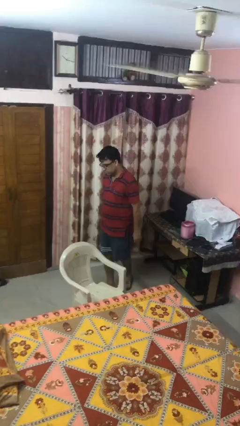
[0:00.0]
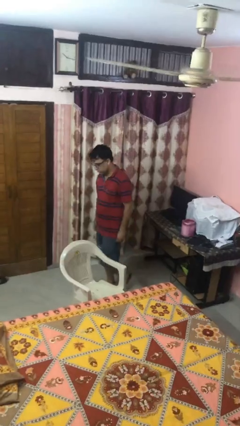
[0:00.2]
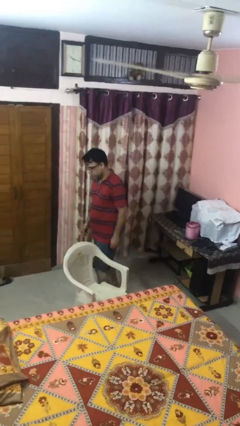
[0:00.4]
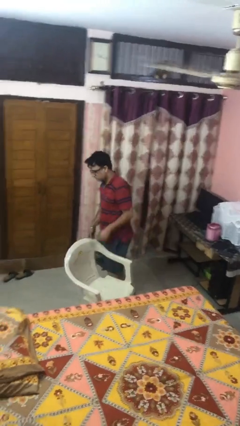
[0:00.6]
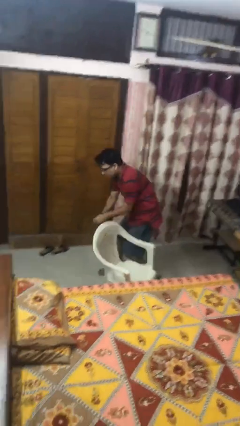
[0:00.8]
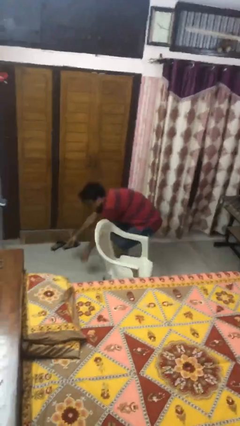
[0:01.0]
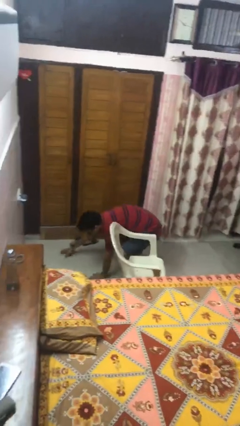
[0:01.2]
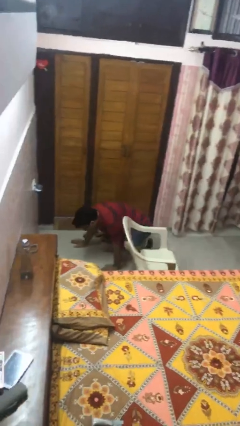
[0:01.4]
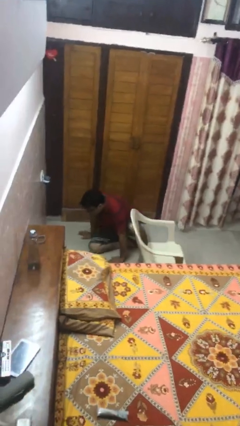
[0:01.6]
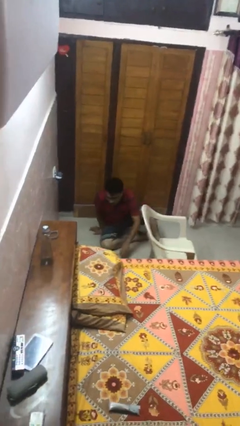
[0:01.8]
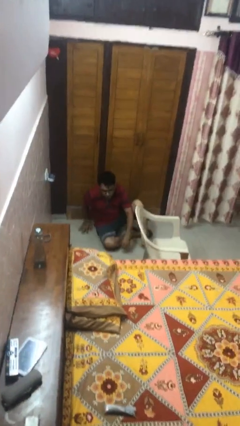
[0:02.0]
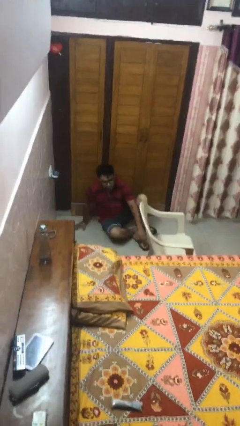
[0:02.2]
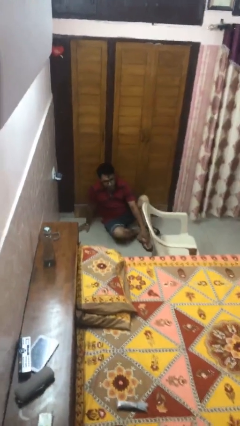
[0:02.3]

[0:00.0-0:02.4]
person trips on object on floor

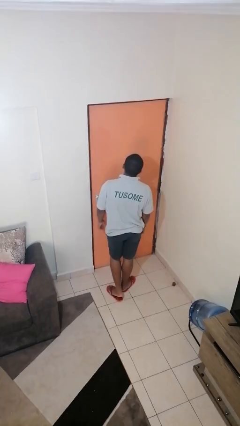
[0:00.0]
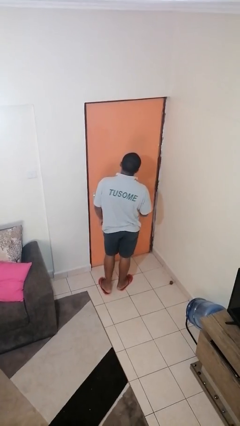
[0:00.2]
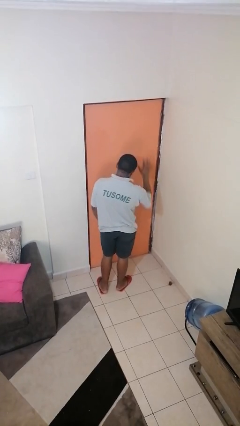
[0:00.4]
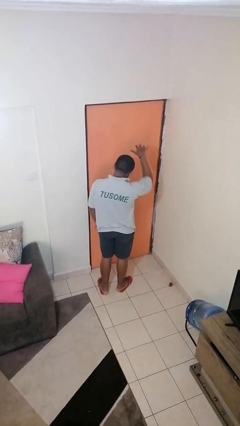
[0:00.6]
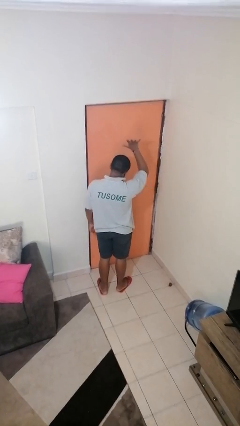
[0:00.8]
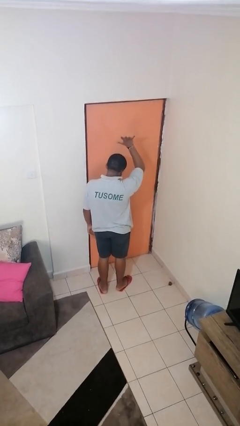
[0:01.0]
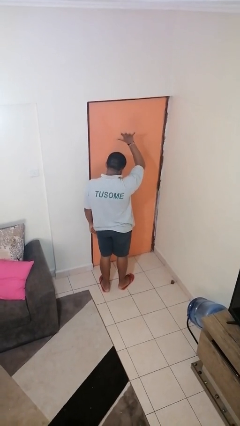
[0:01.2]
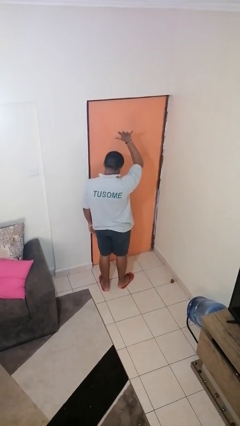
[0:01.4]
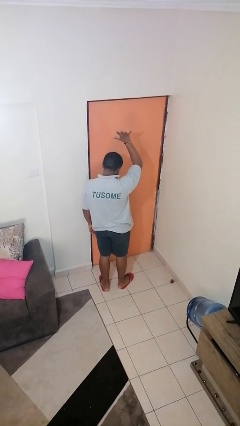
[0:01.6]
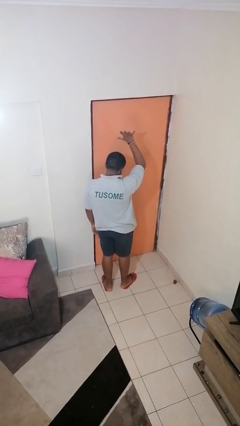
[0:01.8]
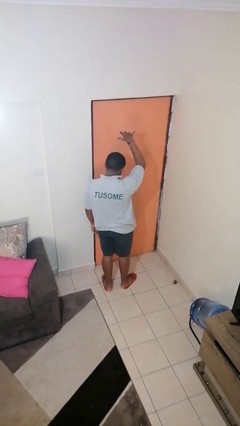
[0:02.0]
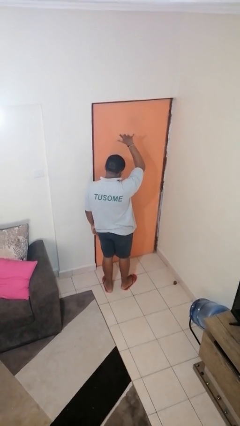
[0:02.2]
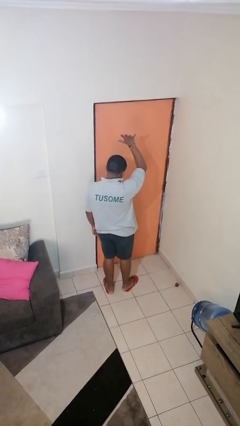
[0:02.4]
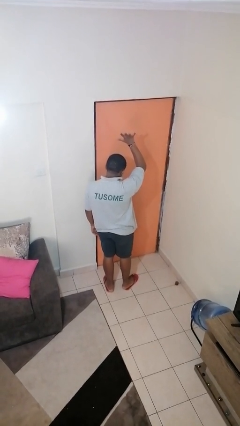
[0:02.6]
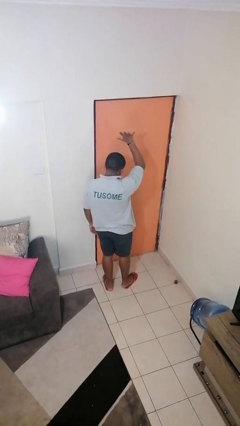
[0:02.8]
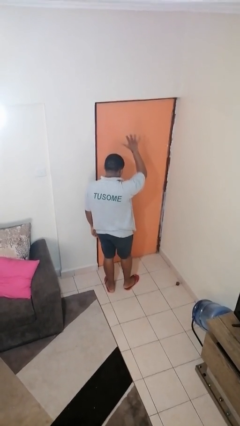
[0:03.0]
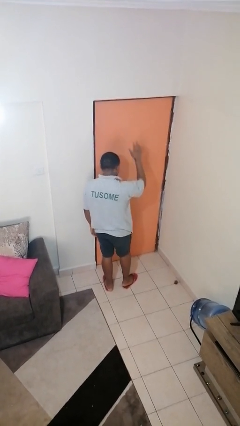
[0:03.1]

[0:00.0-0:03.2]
person gestures number five

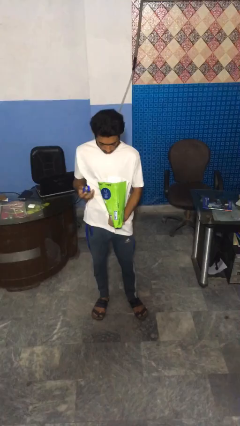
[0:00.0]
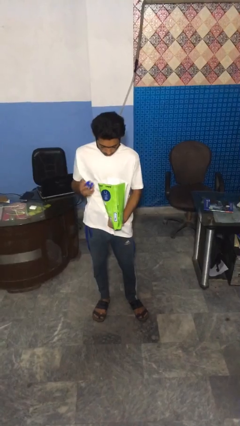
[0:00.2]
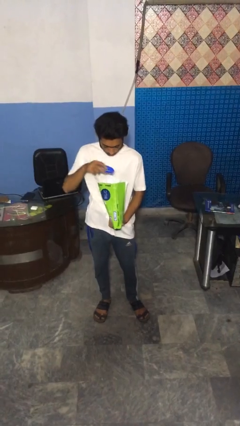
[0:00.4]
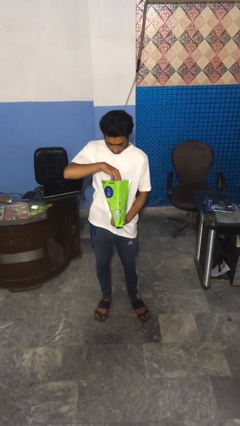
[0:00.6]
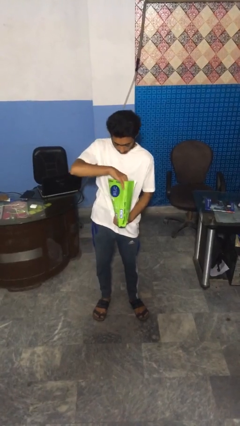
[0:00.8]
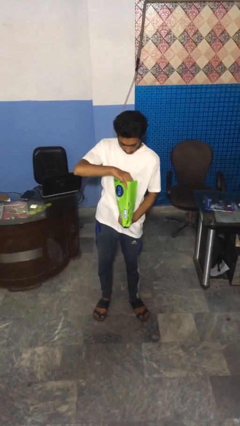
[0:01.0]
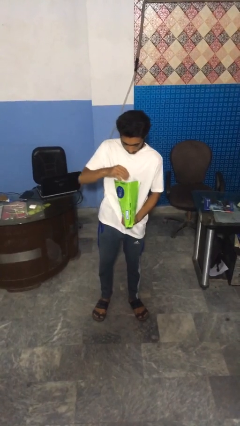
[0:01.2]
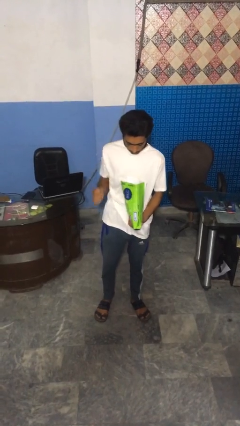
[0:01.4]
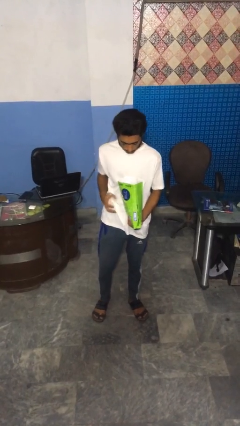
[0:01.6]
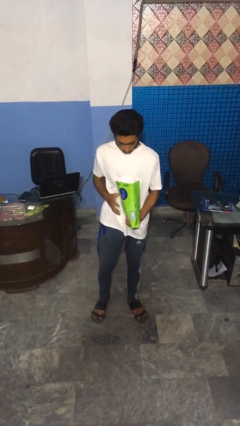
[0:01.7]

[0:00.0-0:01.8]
person puts object into bag

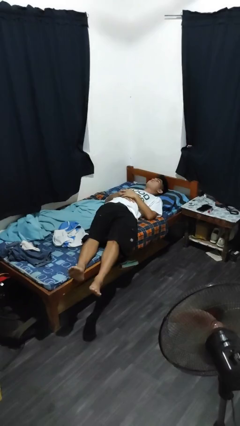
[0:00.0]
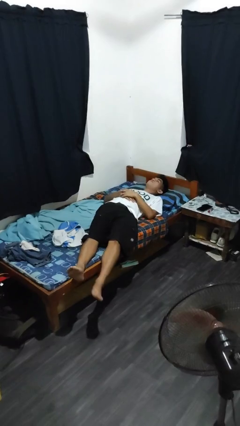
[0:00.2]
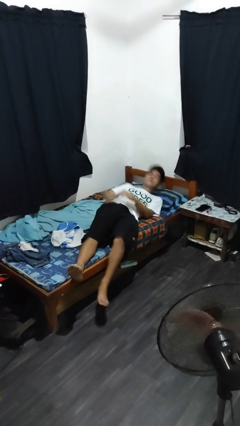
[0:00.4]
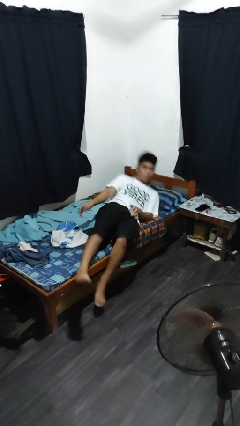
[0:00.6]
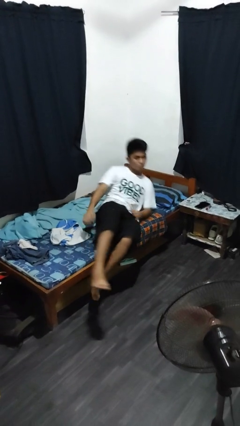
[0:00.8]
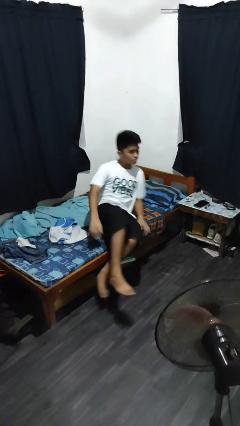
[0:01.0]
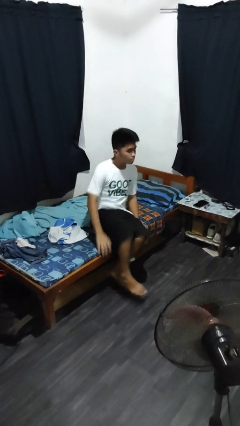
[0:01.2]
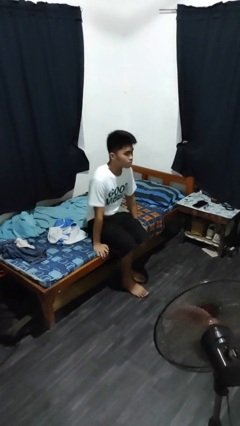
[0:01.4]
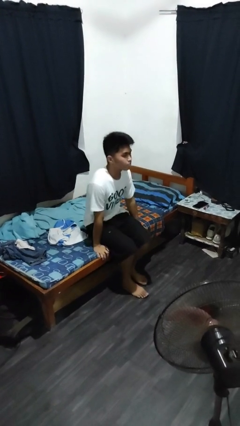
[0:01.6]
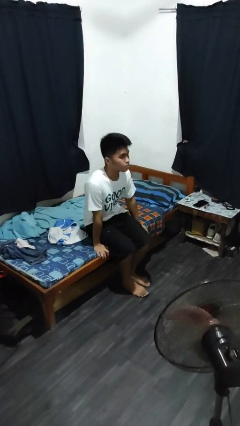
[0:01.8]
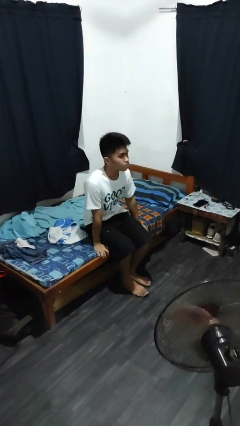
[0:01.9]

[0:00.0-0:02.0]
person stands up

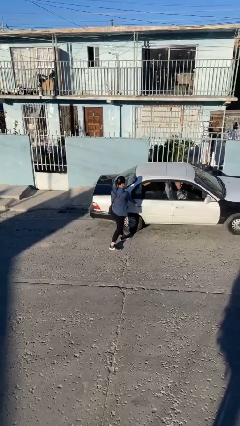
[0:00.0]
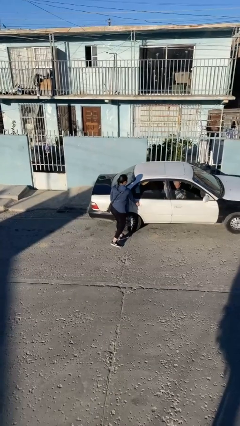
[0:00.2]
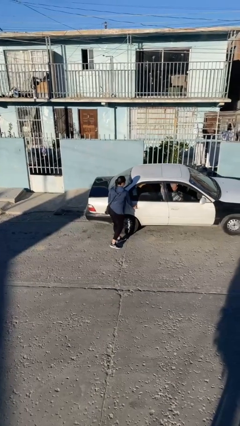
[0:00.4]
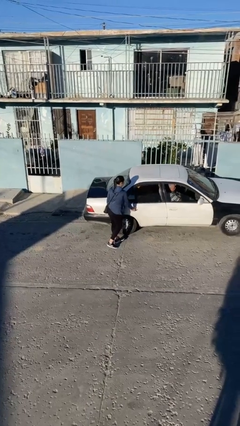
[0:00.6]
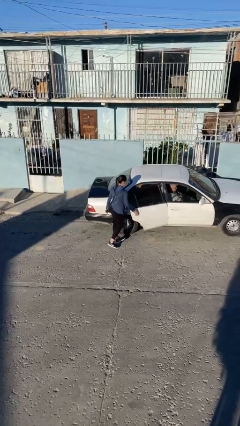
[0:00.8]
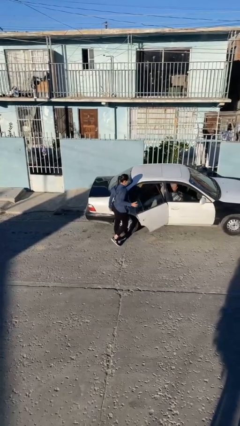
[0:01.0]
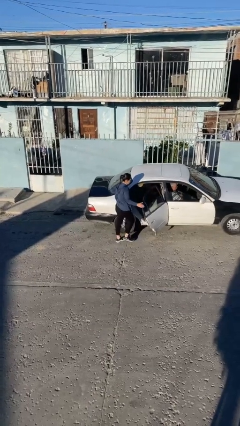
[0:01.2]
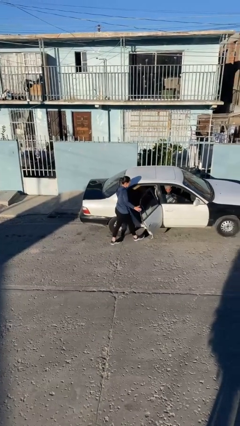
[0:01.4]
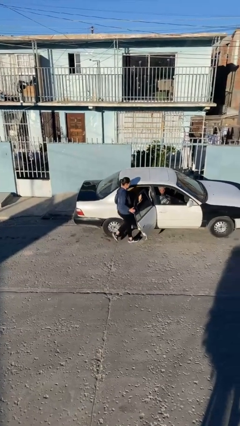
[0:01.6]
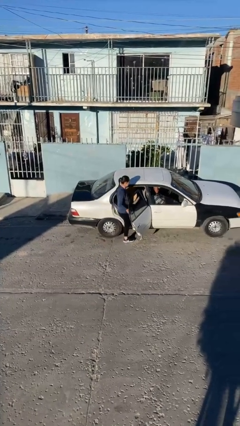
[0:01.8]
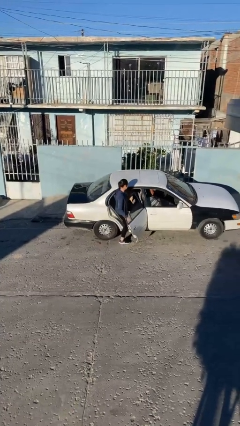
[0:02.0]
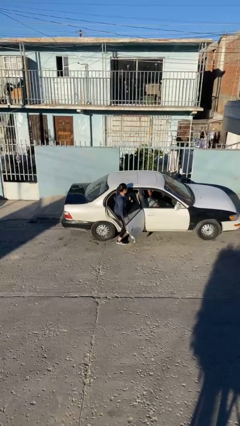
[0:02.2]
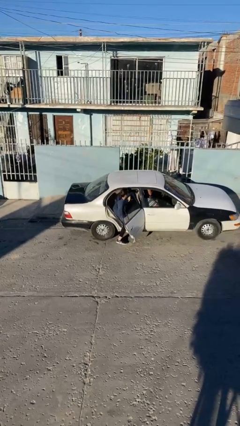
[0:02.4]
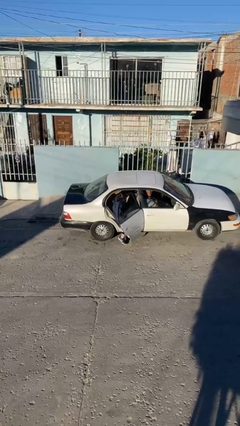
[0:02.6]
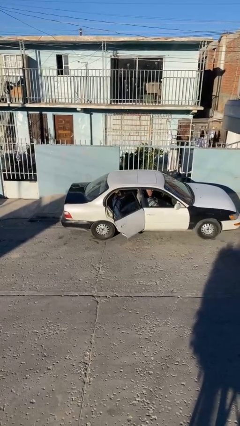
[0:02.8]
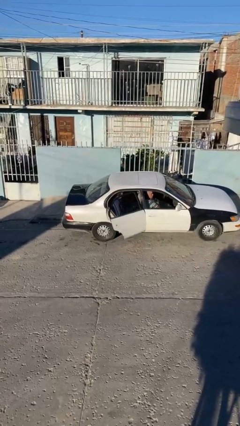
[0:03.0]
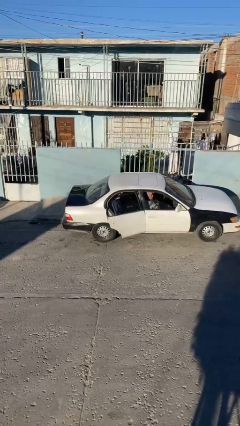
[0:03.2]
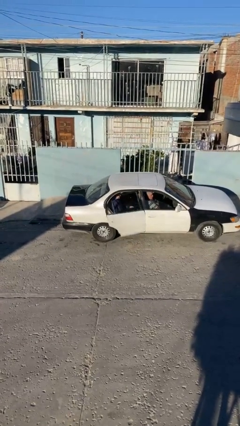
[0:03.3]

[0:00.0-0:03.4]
car picks up person

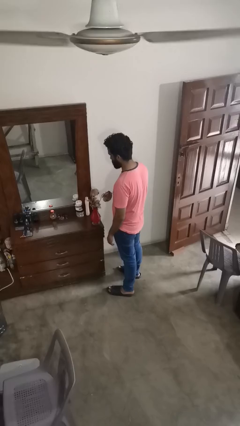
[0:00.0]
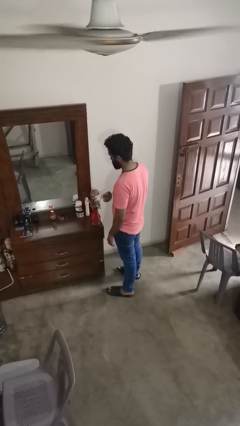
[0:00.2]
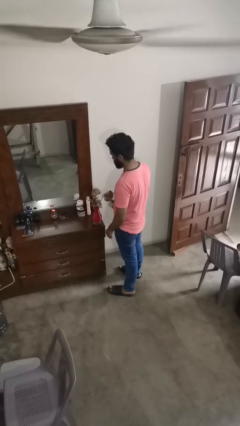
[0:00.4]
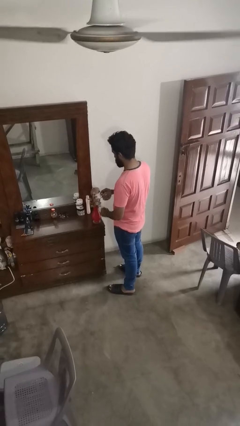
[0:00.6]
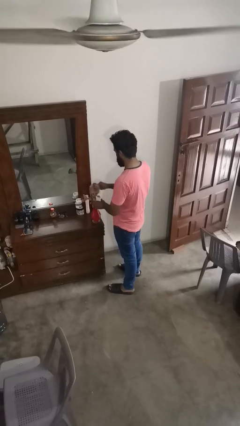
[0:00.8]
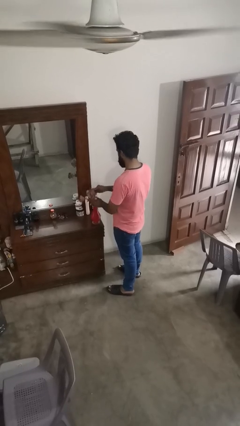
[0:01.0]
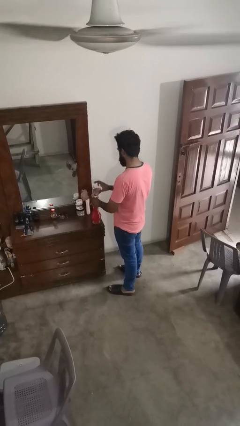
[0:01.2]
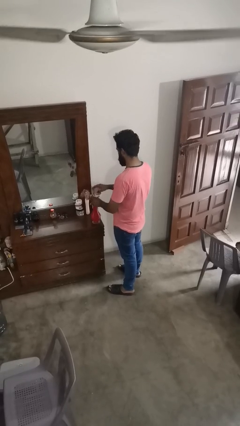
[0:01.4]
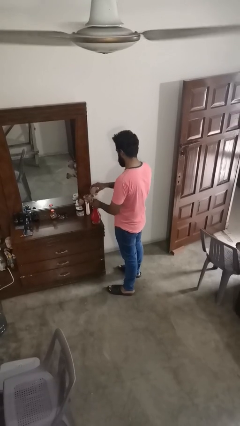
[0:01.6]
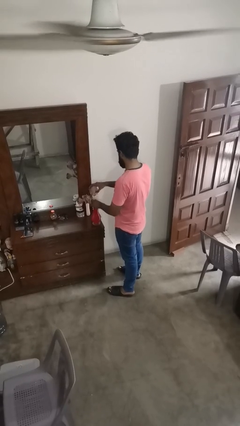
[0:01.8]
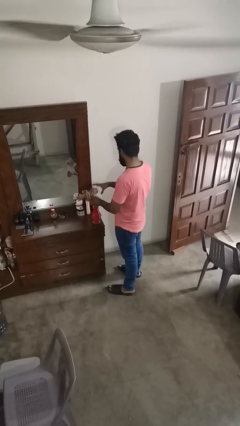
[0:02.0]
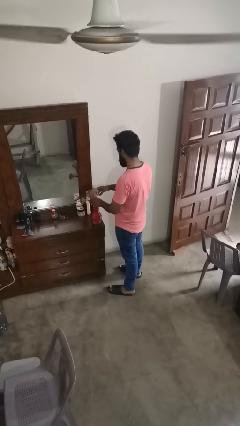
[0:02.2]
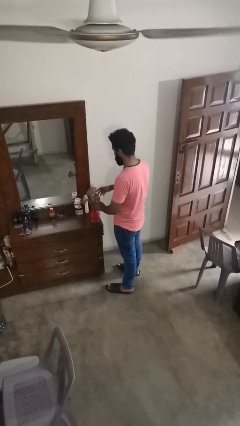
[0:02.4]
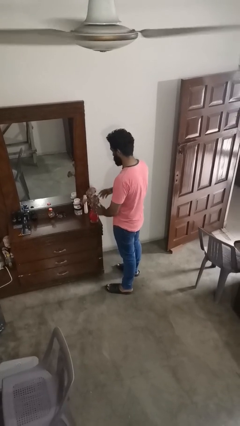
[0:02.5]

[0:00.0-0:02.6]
person arranges flowers in vase

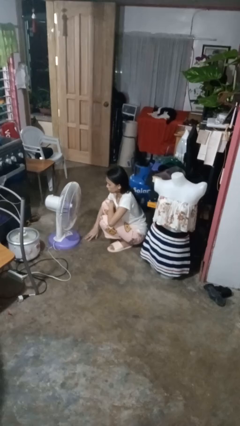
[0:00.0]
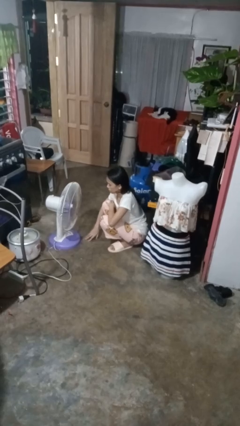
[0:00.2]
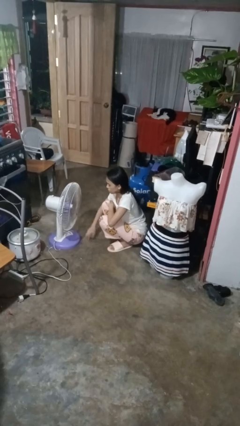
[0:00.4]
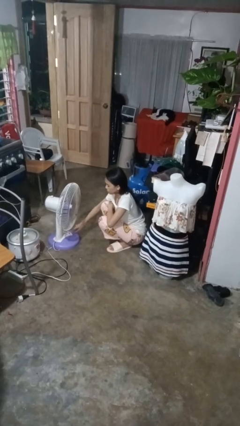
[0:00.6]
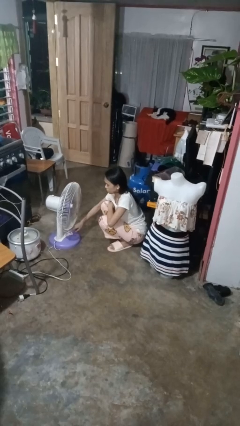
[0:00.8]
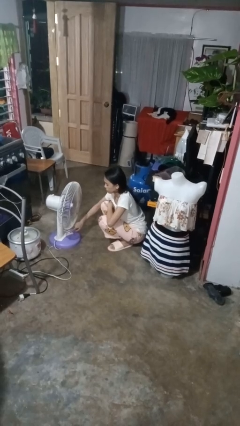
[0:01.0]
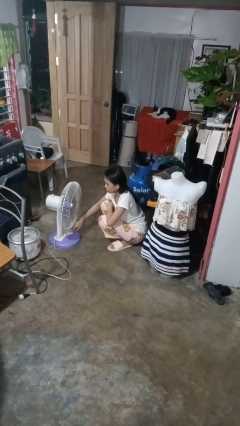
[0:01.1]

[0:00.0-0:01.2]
person turns off fan

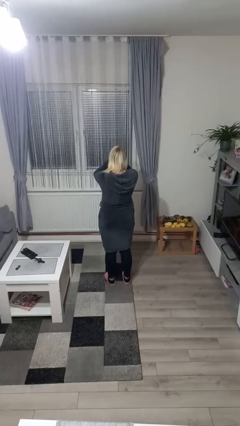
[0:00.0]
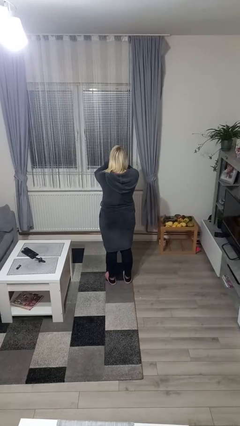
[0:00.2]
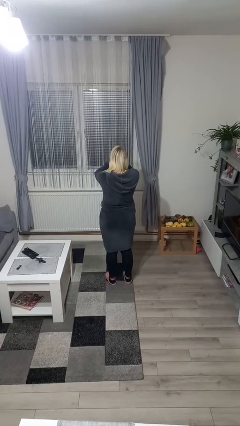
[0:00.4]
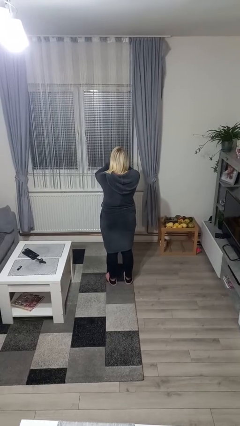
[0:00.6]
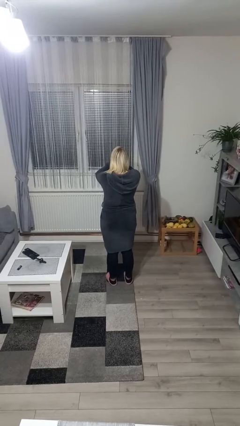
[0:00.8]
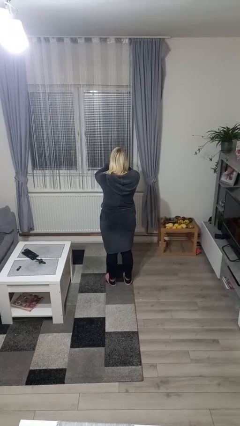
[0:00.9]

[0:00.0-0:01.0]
person covers face with hands
